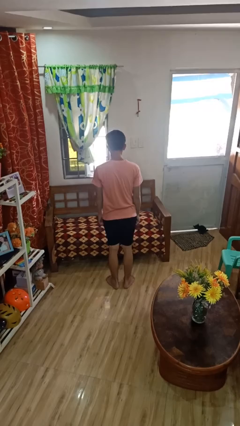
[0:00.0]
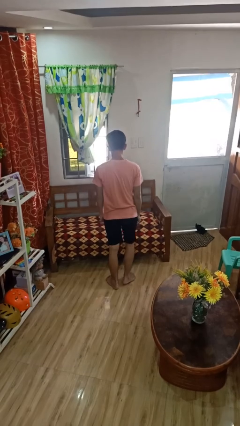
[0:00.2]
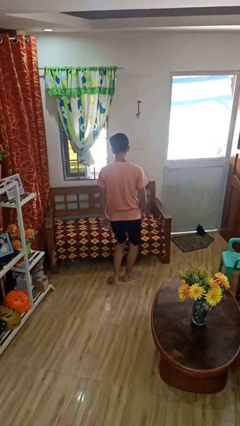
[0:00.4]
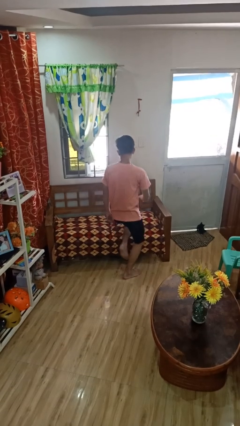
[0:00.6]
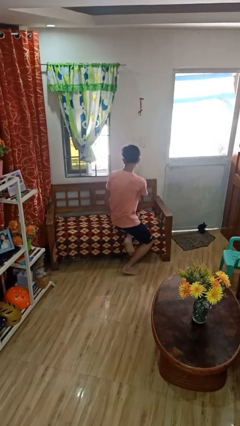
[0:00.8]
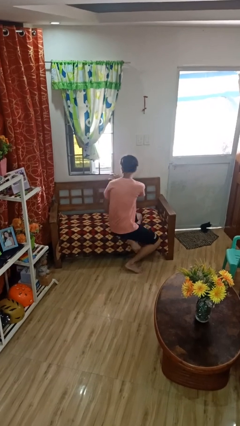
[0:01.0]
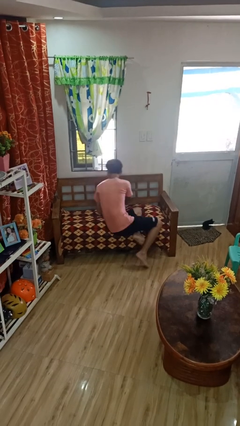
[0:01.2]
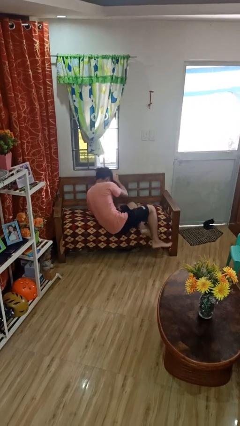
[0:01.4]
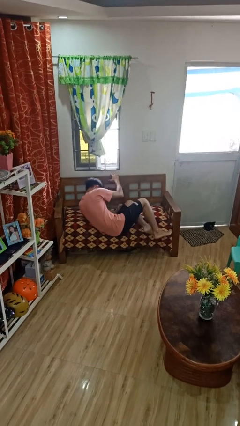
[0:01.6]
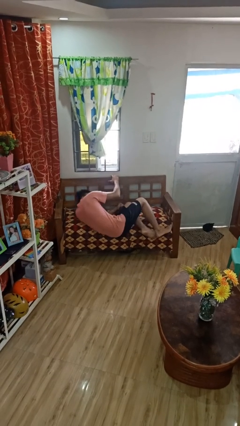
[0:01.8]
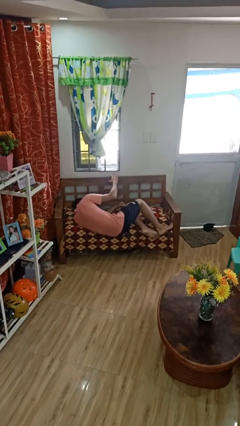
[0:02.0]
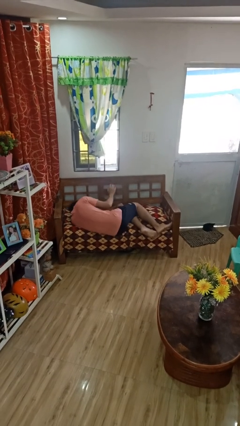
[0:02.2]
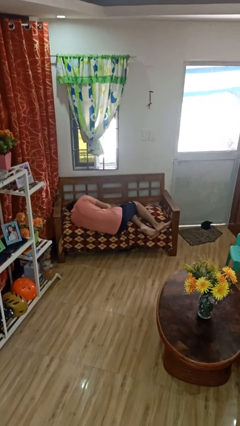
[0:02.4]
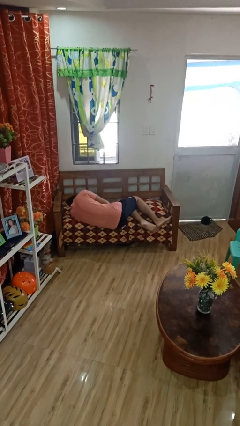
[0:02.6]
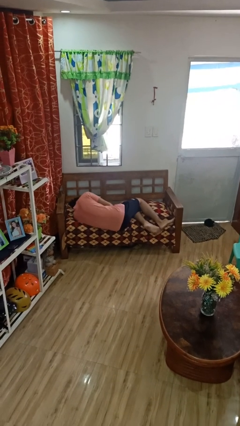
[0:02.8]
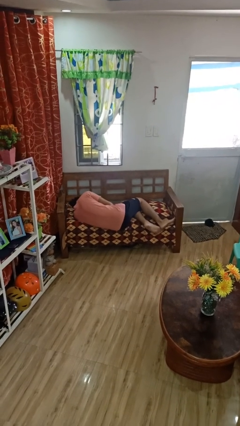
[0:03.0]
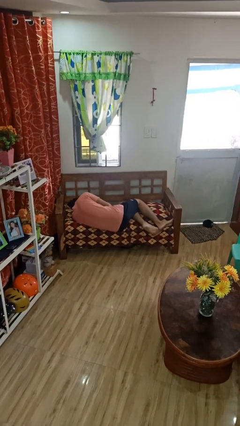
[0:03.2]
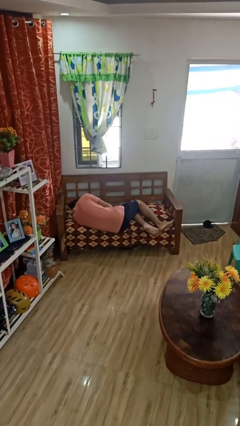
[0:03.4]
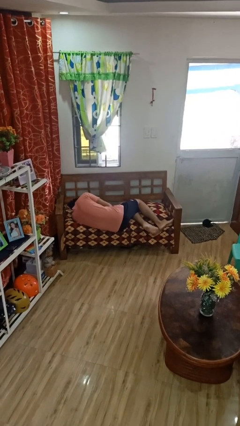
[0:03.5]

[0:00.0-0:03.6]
person lies down on couch

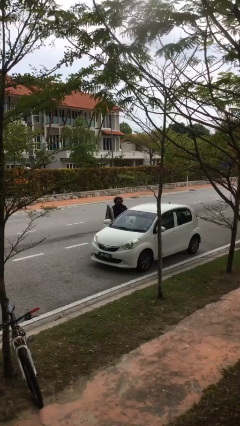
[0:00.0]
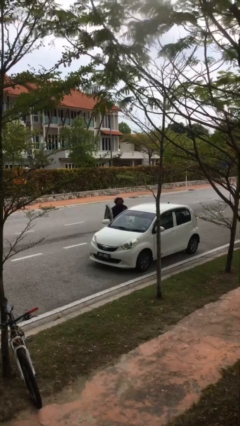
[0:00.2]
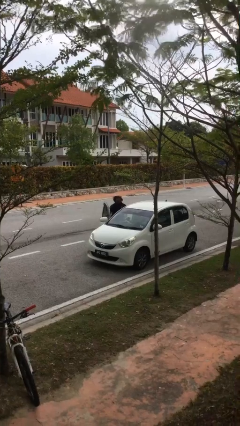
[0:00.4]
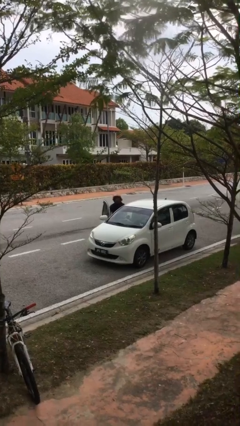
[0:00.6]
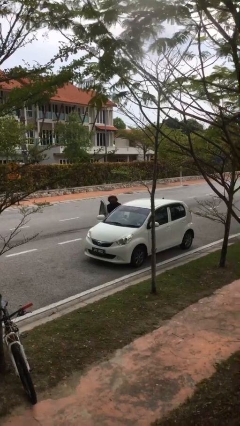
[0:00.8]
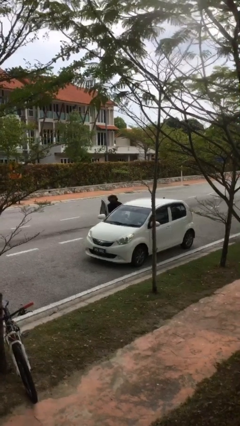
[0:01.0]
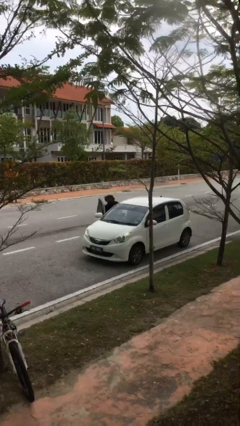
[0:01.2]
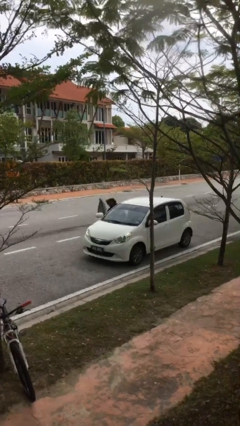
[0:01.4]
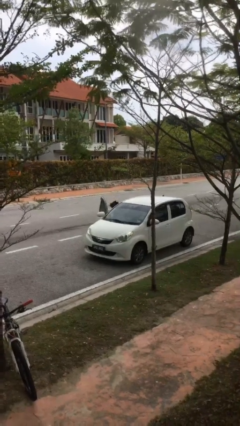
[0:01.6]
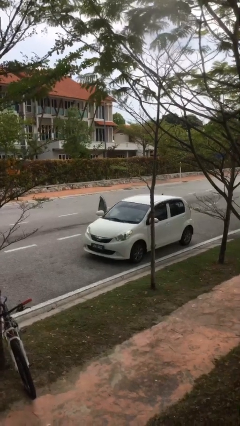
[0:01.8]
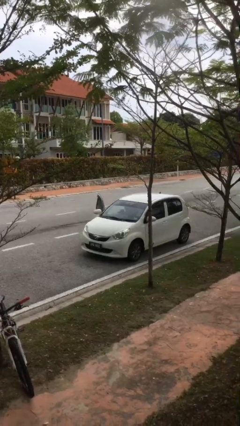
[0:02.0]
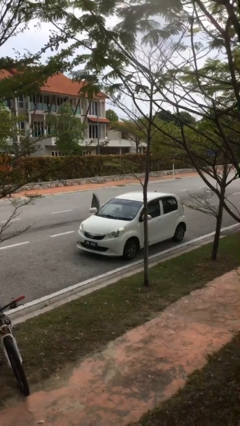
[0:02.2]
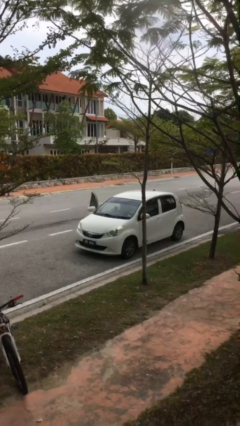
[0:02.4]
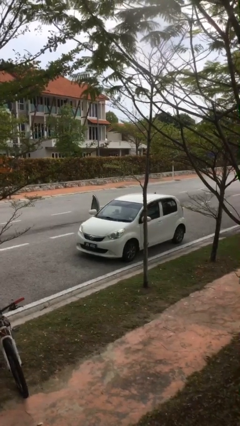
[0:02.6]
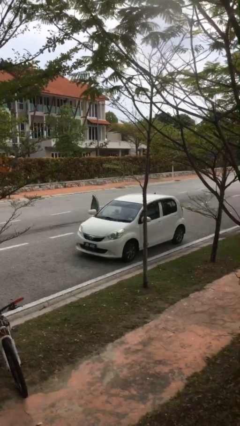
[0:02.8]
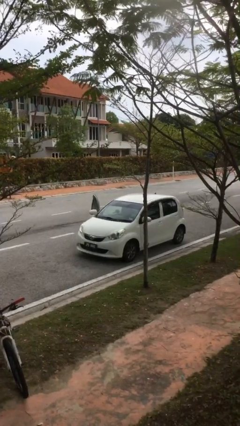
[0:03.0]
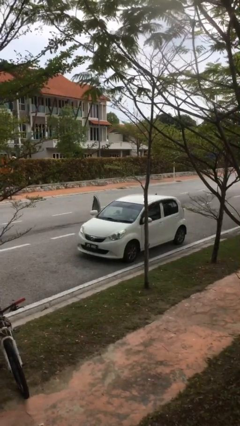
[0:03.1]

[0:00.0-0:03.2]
person enters car

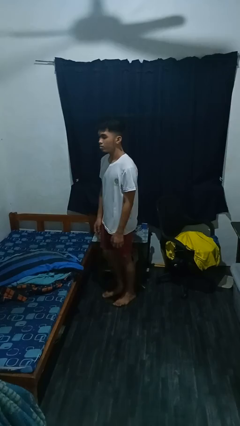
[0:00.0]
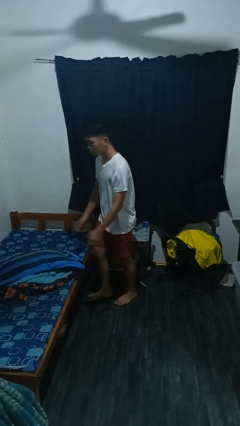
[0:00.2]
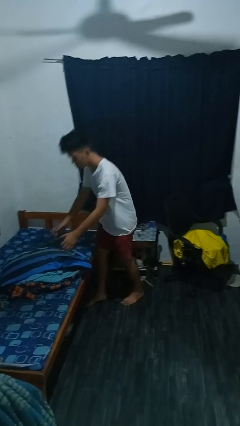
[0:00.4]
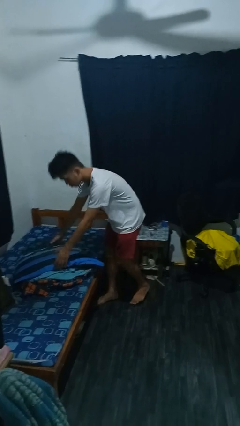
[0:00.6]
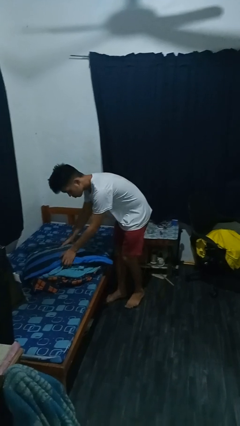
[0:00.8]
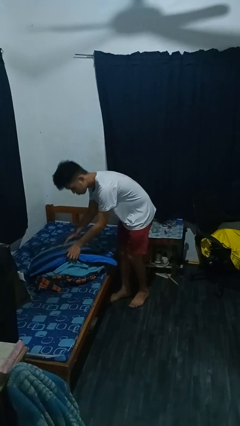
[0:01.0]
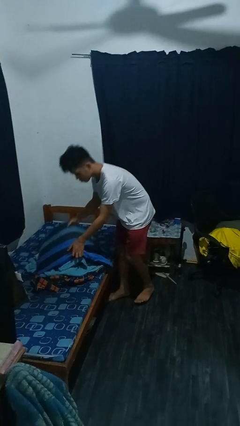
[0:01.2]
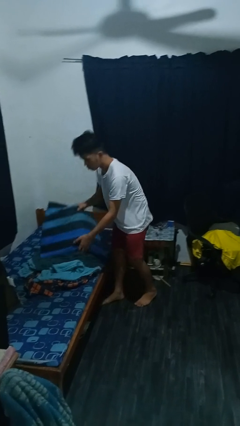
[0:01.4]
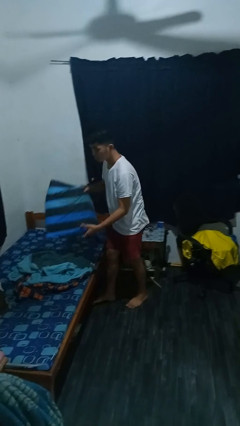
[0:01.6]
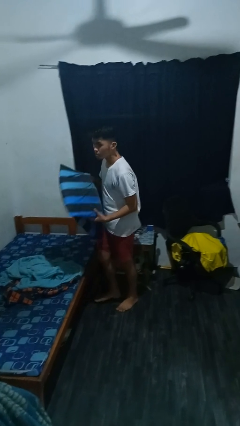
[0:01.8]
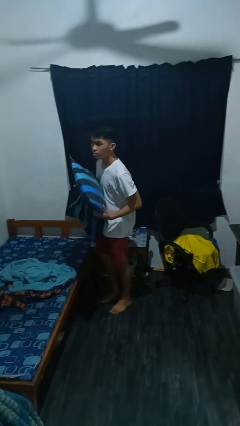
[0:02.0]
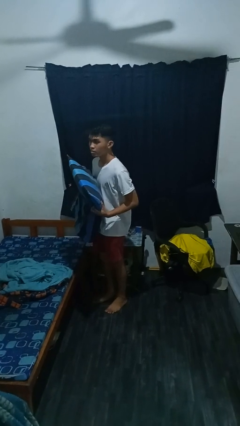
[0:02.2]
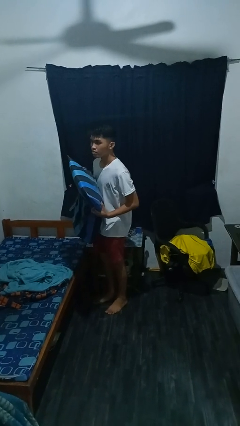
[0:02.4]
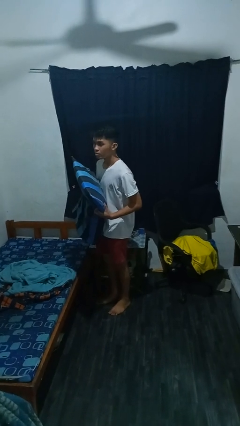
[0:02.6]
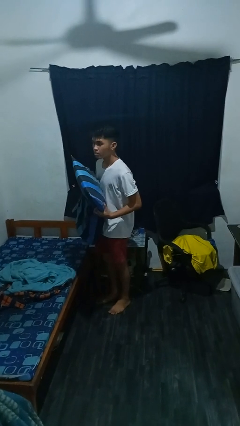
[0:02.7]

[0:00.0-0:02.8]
person picks up object from bed

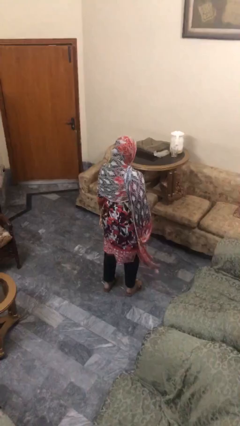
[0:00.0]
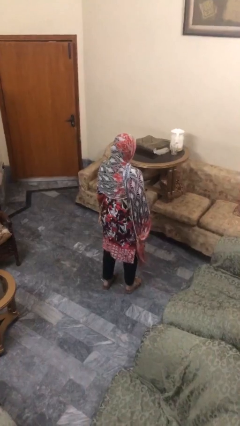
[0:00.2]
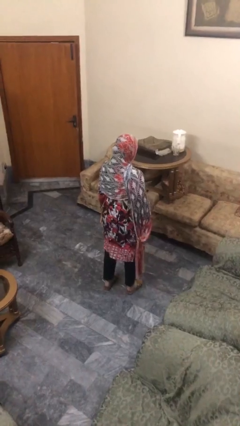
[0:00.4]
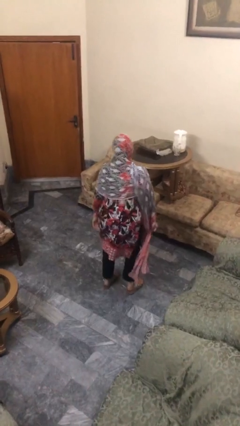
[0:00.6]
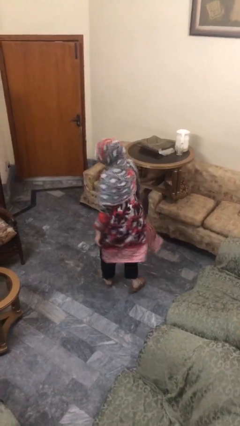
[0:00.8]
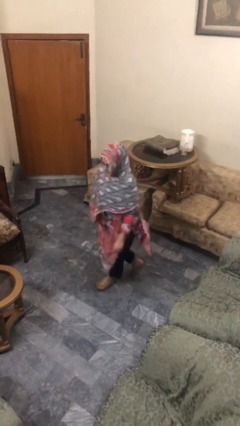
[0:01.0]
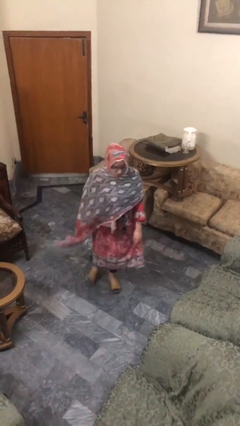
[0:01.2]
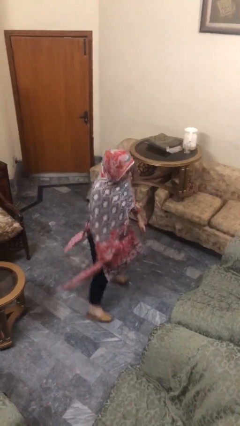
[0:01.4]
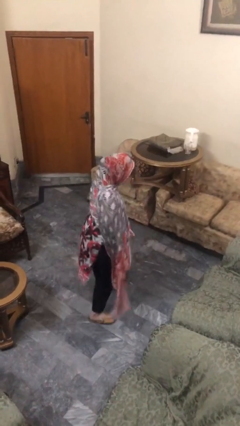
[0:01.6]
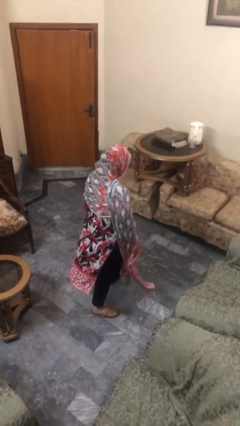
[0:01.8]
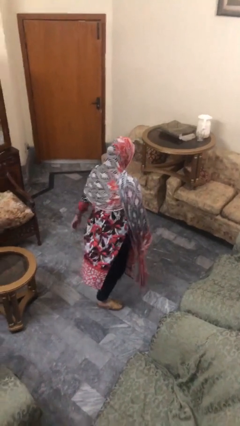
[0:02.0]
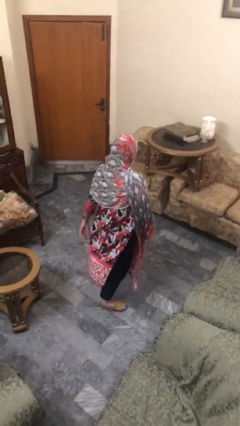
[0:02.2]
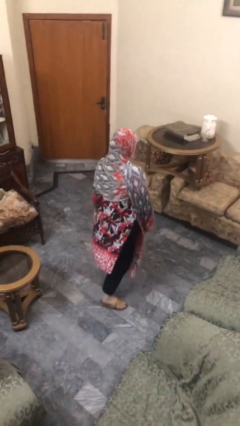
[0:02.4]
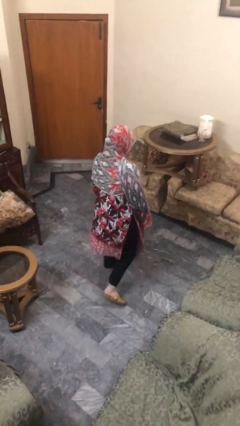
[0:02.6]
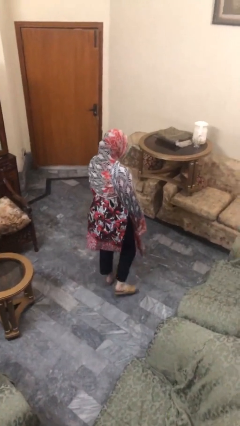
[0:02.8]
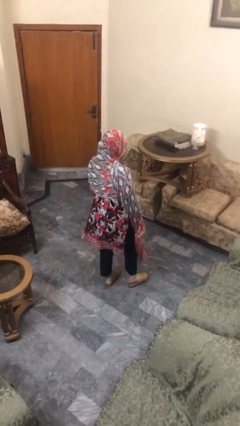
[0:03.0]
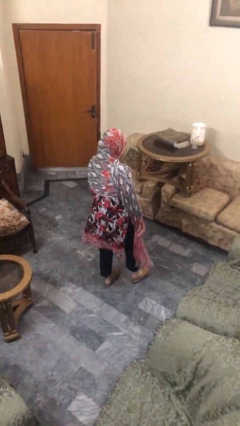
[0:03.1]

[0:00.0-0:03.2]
person twirls

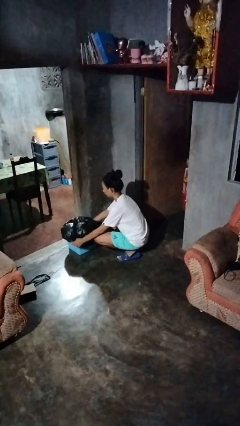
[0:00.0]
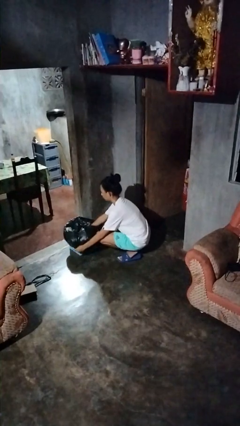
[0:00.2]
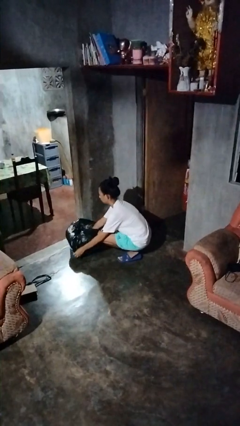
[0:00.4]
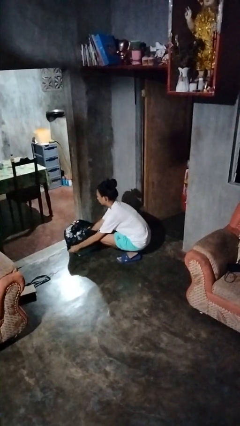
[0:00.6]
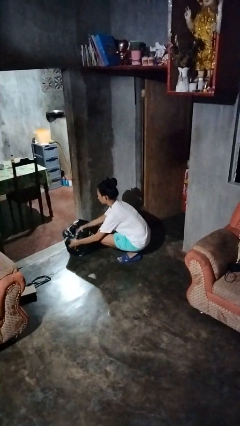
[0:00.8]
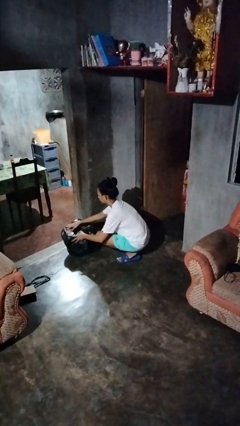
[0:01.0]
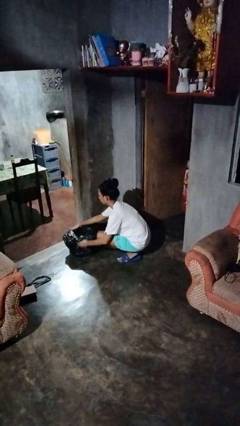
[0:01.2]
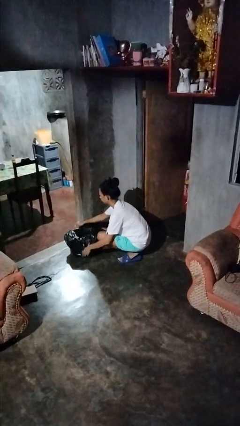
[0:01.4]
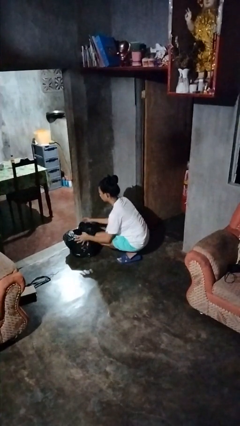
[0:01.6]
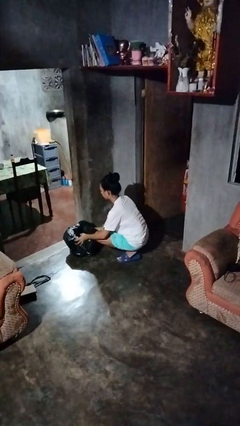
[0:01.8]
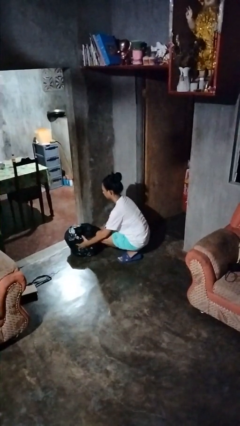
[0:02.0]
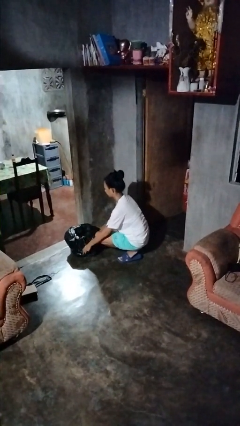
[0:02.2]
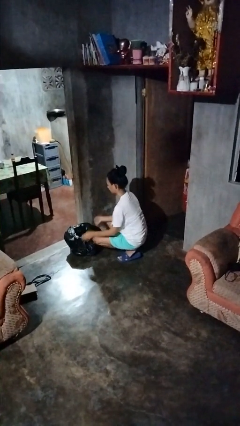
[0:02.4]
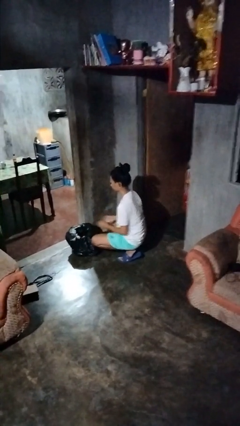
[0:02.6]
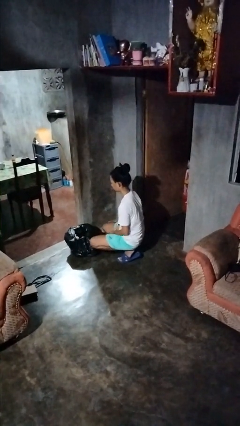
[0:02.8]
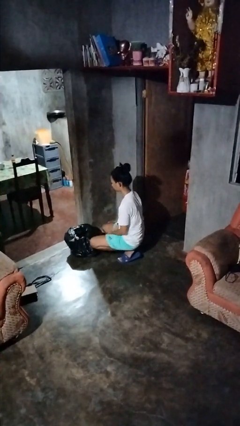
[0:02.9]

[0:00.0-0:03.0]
person inserts trashbag into trashcan

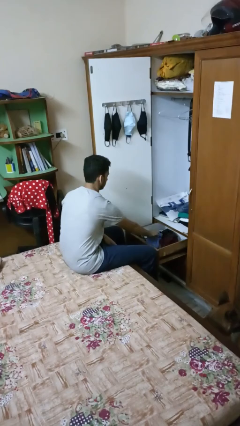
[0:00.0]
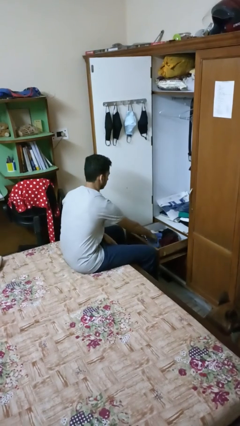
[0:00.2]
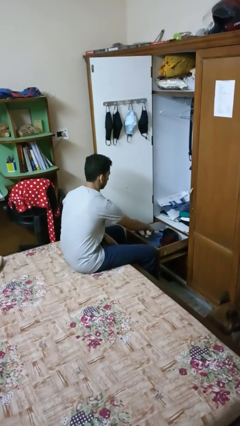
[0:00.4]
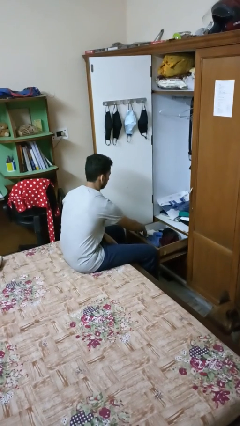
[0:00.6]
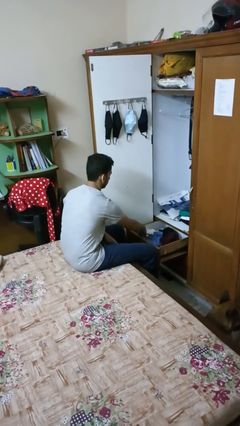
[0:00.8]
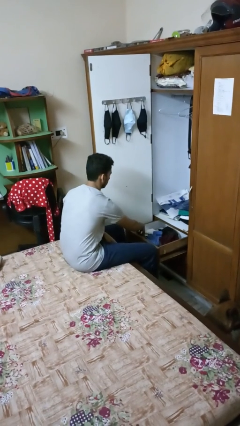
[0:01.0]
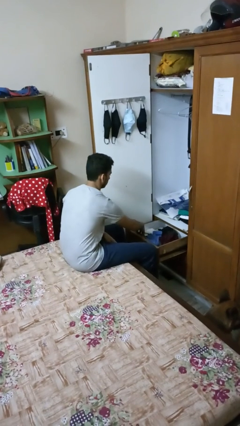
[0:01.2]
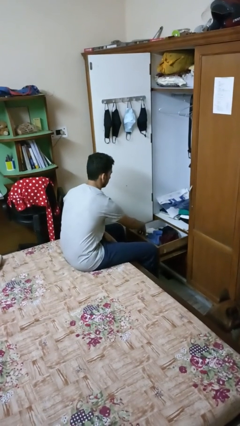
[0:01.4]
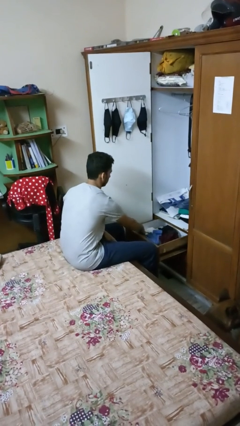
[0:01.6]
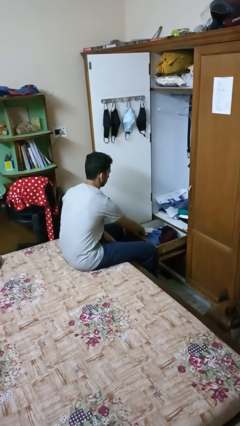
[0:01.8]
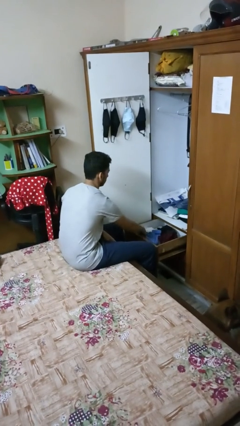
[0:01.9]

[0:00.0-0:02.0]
person puts clothes into dresser
